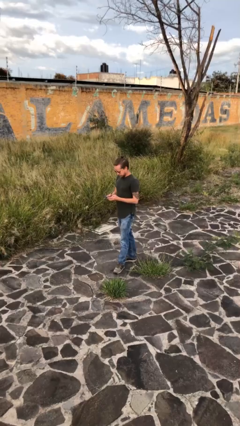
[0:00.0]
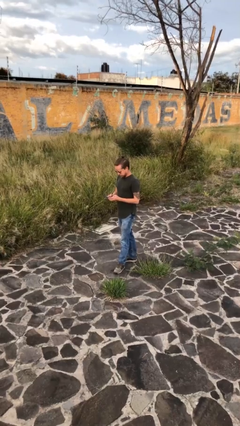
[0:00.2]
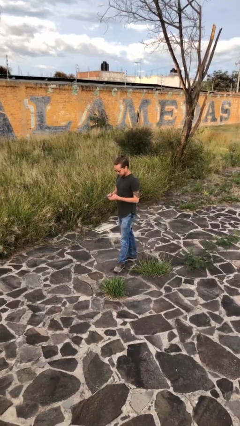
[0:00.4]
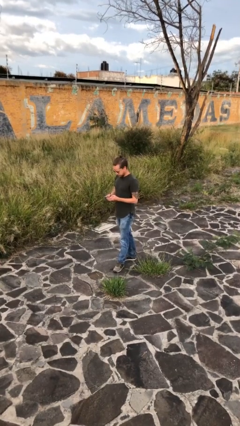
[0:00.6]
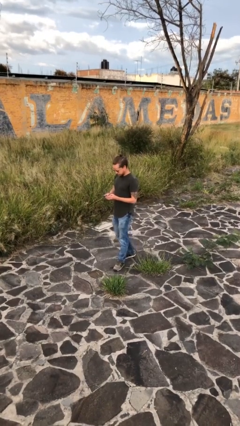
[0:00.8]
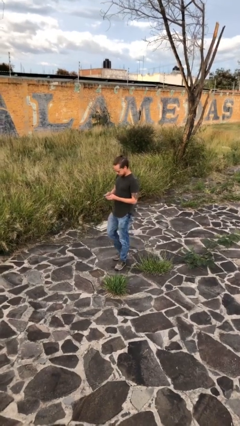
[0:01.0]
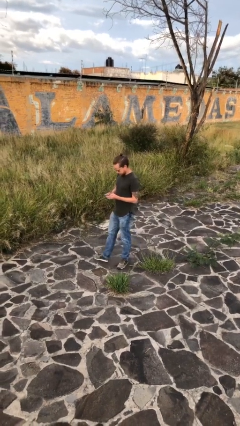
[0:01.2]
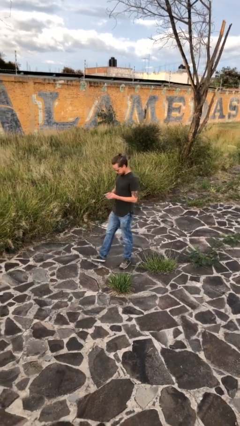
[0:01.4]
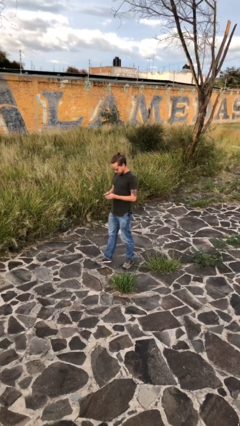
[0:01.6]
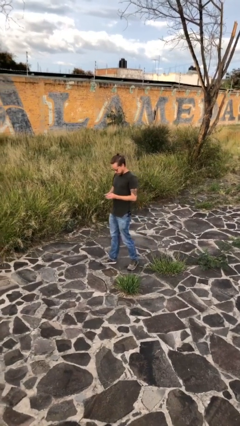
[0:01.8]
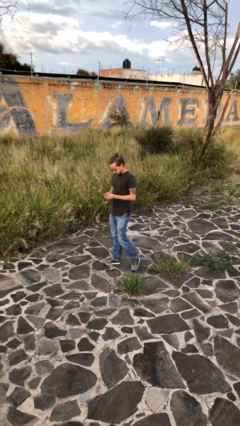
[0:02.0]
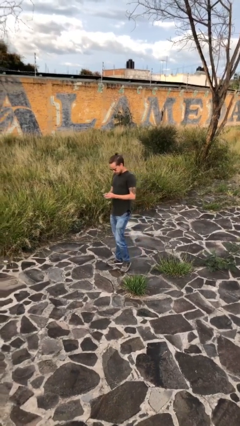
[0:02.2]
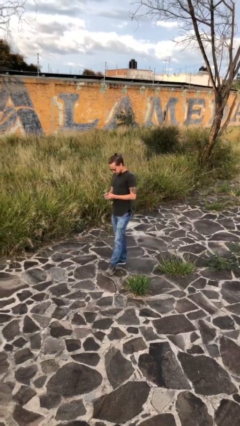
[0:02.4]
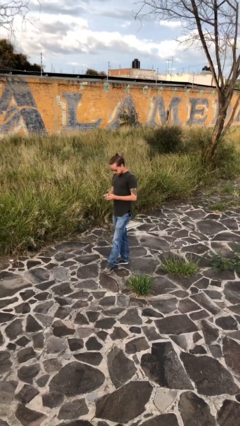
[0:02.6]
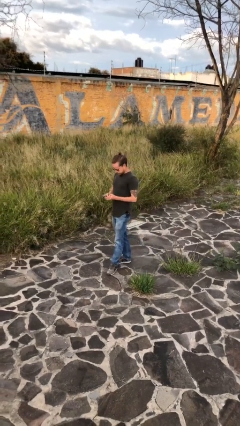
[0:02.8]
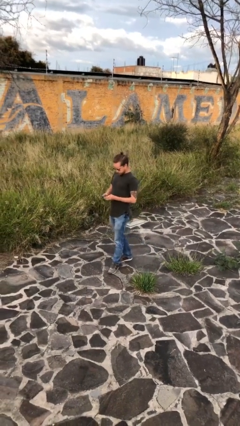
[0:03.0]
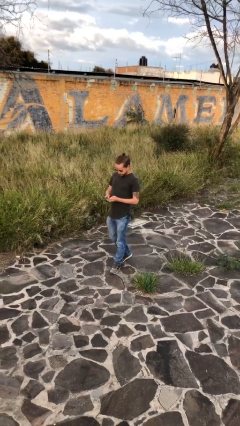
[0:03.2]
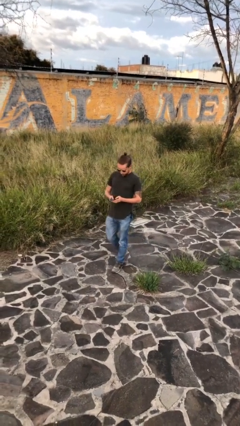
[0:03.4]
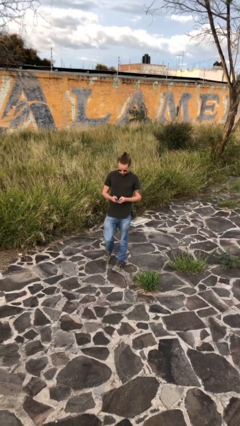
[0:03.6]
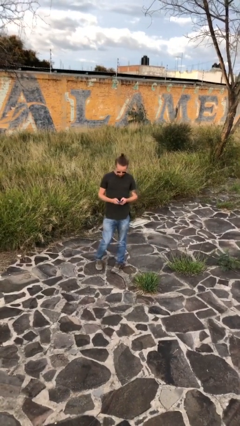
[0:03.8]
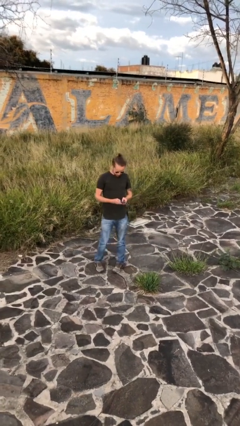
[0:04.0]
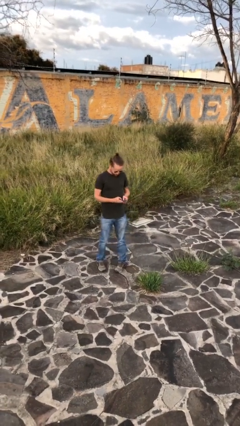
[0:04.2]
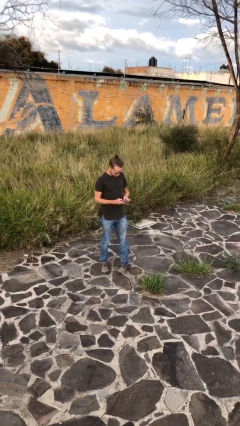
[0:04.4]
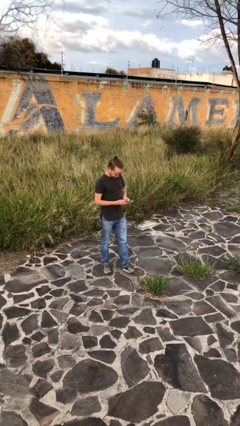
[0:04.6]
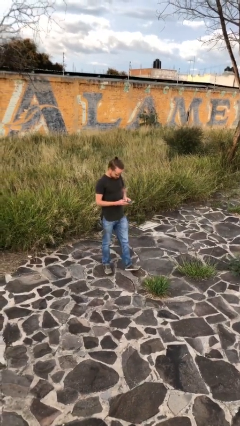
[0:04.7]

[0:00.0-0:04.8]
person texts on phone

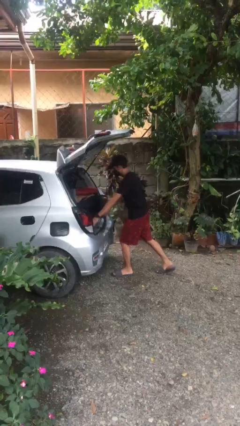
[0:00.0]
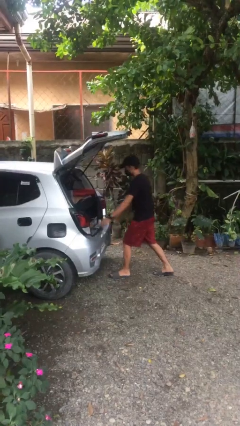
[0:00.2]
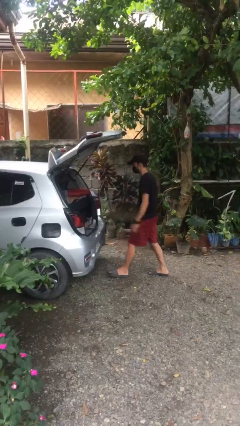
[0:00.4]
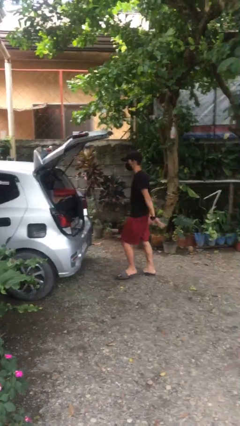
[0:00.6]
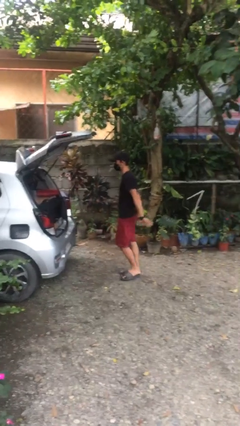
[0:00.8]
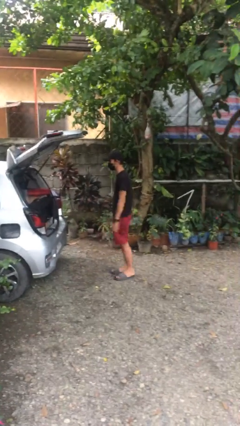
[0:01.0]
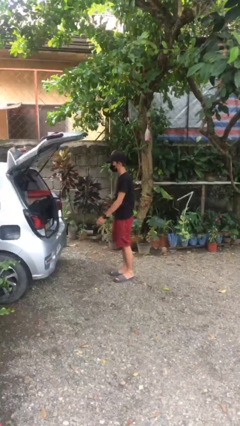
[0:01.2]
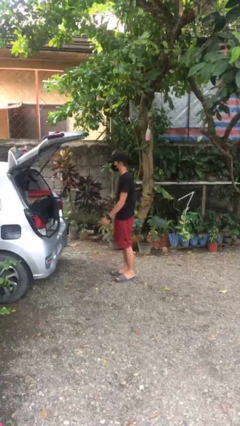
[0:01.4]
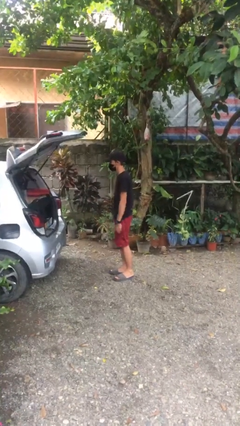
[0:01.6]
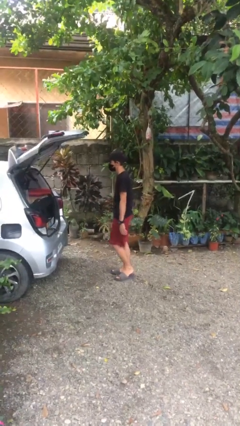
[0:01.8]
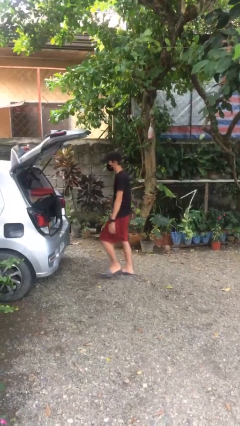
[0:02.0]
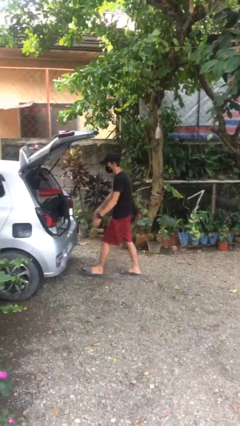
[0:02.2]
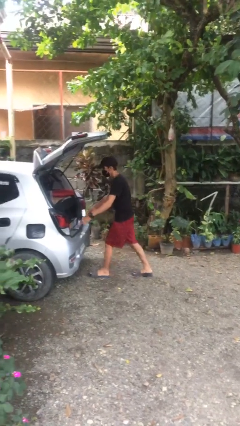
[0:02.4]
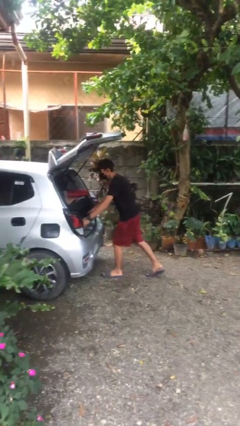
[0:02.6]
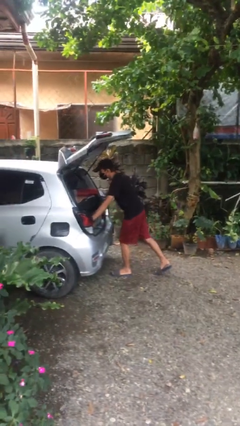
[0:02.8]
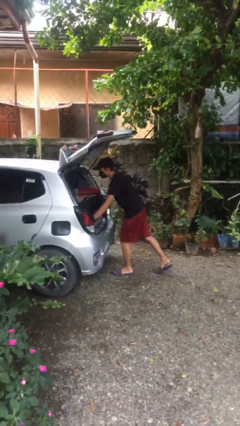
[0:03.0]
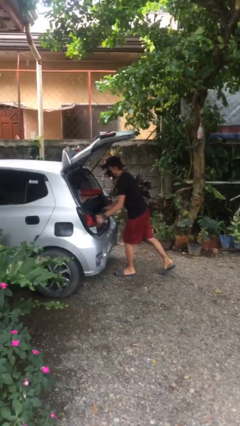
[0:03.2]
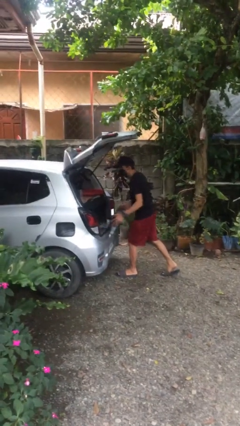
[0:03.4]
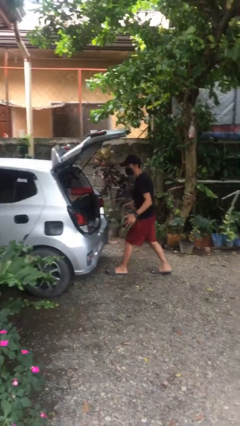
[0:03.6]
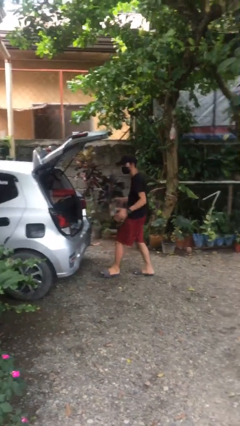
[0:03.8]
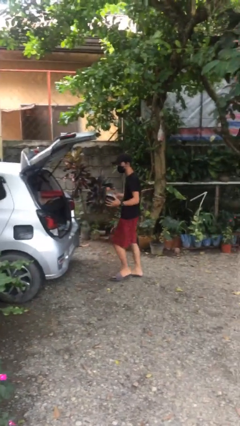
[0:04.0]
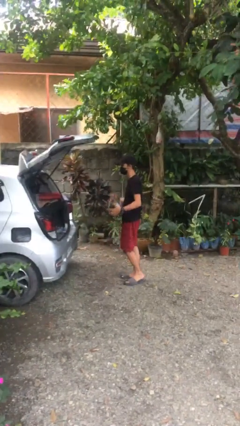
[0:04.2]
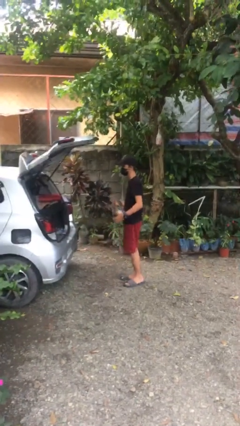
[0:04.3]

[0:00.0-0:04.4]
person unloads car

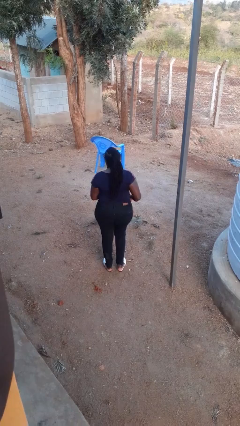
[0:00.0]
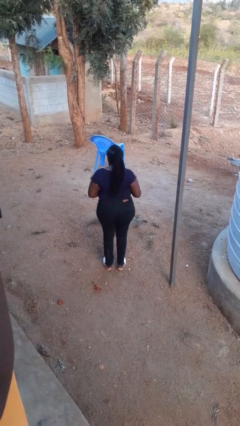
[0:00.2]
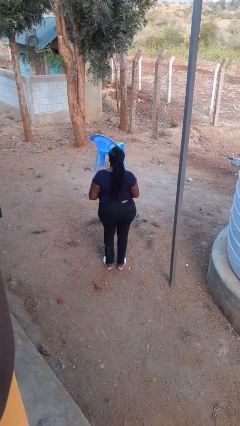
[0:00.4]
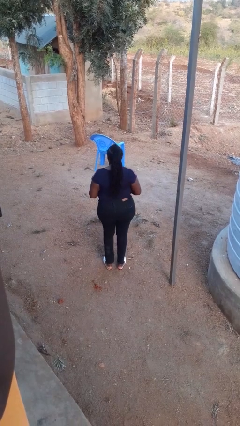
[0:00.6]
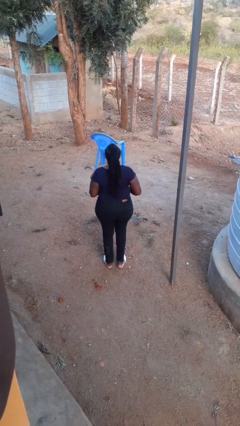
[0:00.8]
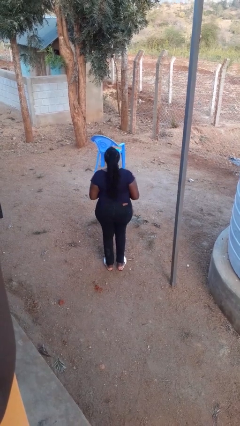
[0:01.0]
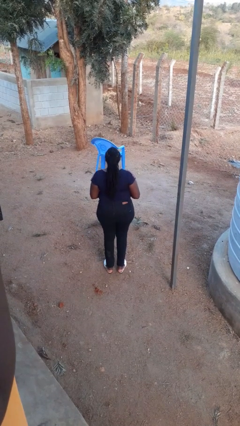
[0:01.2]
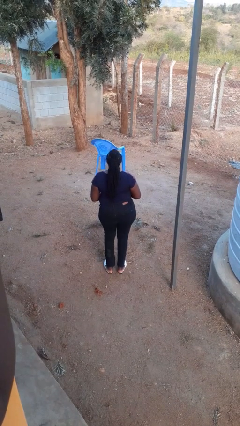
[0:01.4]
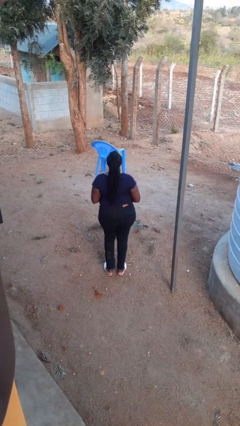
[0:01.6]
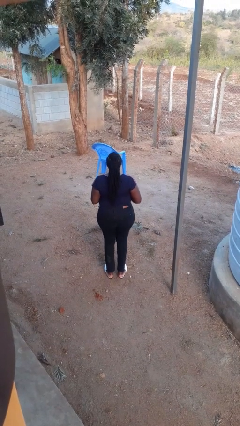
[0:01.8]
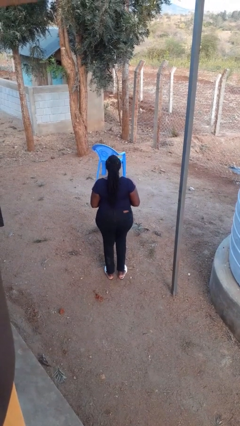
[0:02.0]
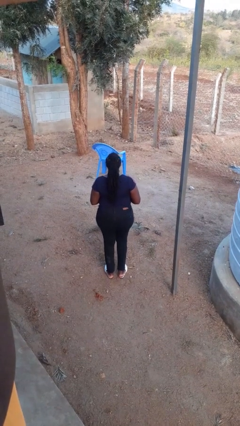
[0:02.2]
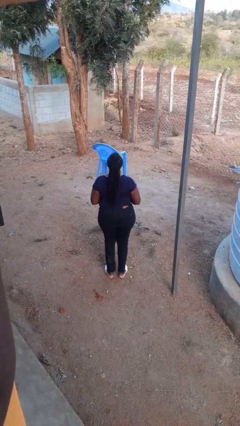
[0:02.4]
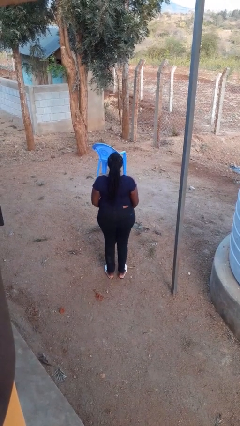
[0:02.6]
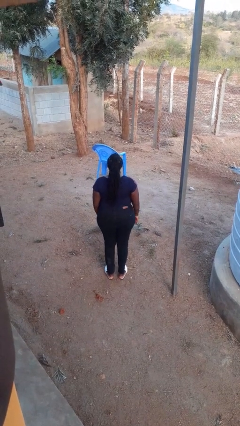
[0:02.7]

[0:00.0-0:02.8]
person wiggles hips

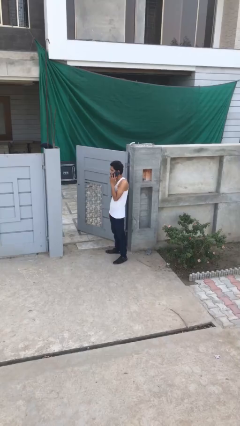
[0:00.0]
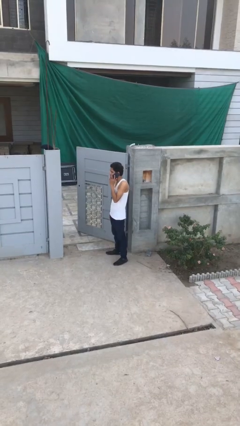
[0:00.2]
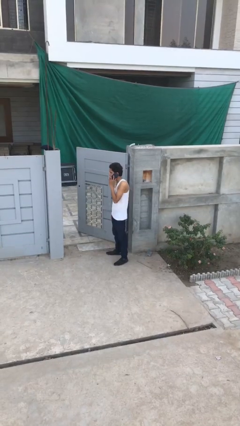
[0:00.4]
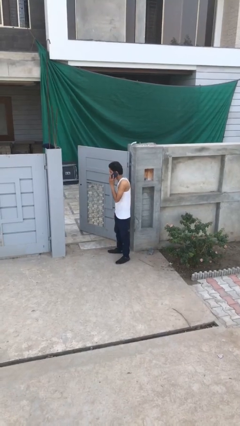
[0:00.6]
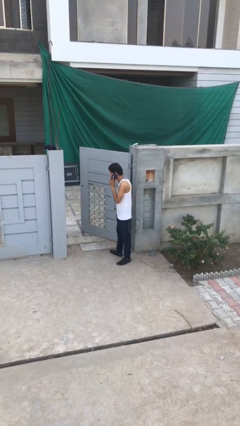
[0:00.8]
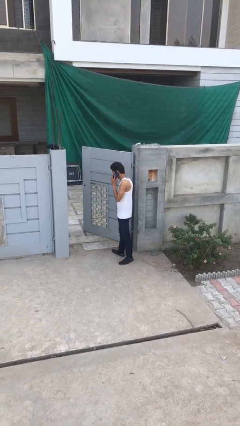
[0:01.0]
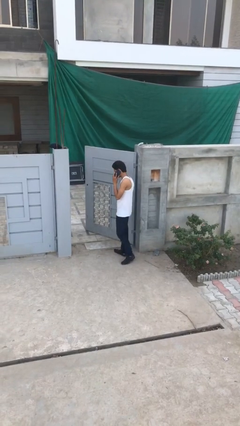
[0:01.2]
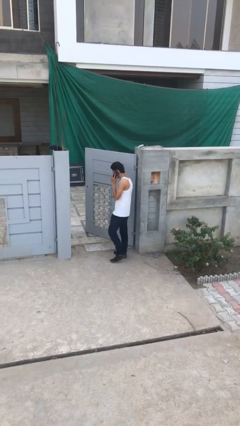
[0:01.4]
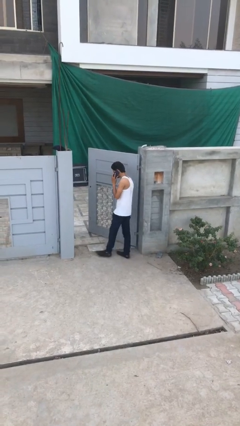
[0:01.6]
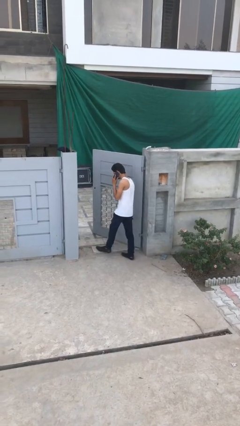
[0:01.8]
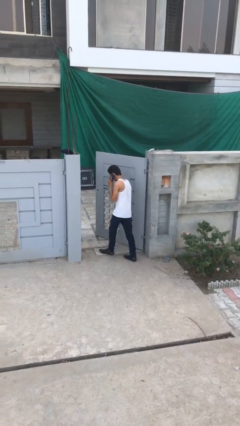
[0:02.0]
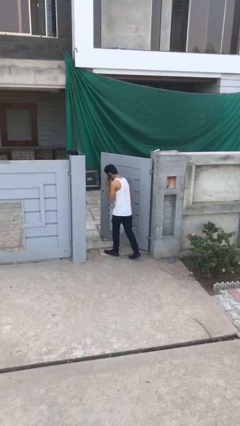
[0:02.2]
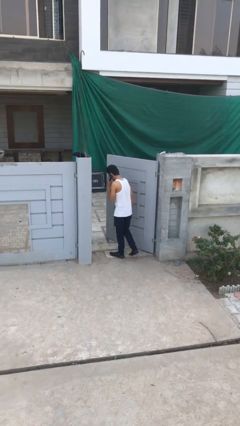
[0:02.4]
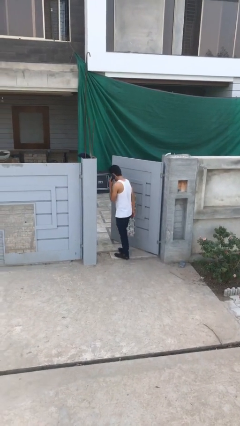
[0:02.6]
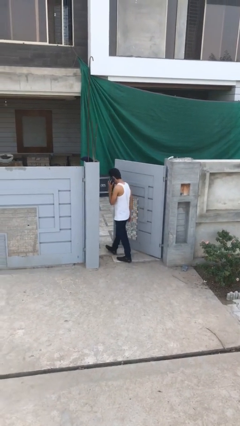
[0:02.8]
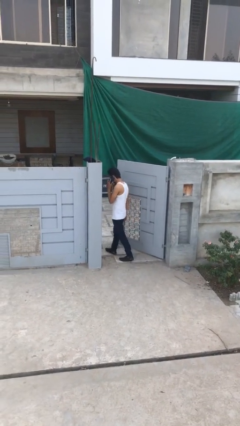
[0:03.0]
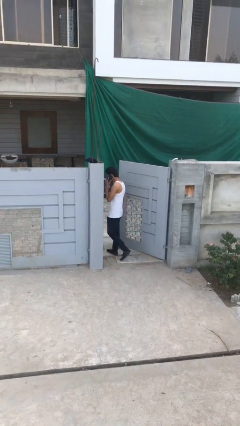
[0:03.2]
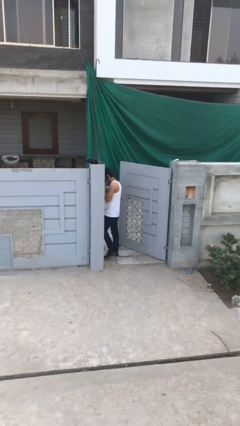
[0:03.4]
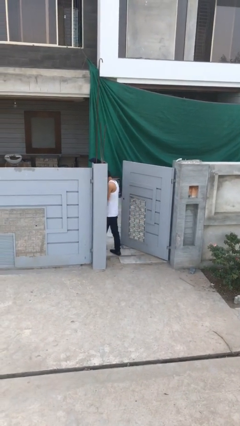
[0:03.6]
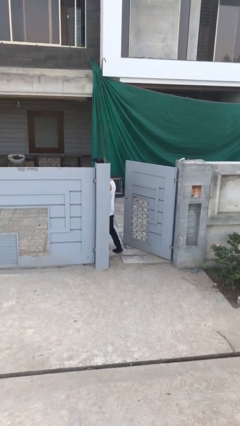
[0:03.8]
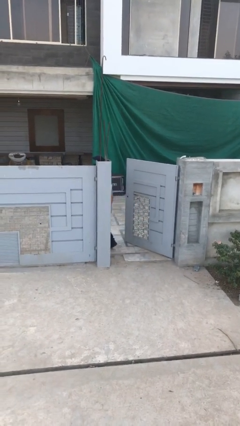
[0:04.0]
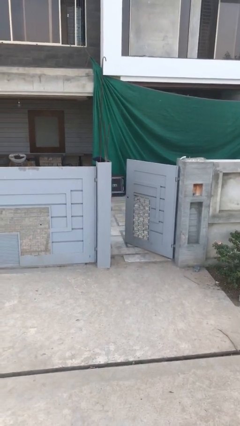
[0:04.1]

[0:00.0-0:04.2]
person exits scene through structure

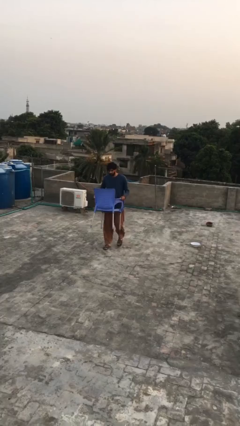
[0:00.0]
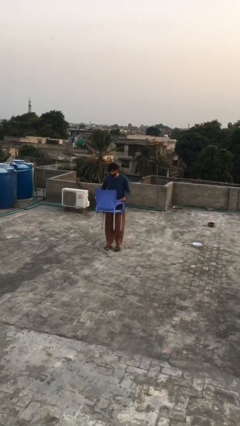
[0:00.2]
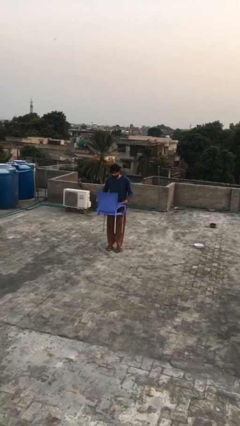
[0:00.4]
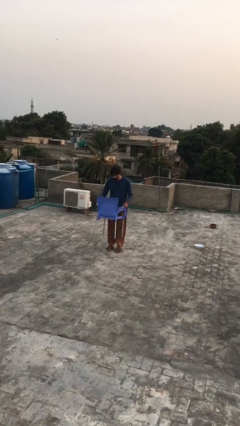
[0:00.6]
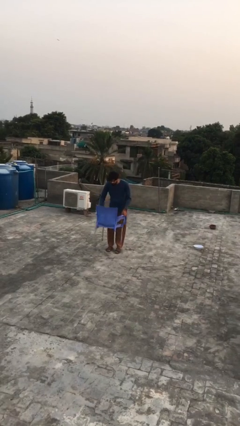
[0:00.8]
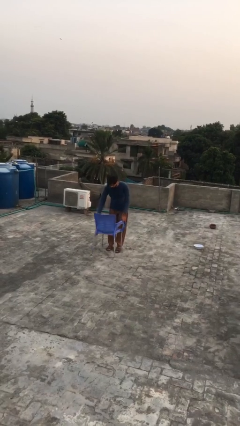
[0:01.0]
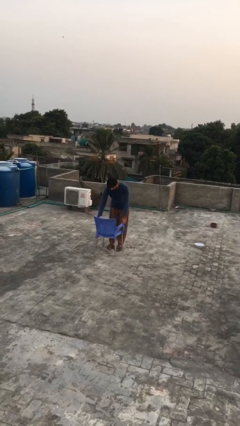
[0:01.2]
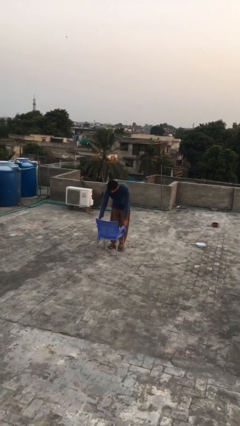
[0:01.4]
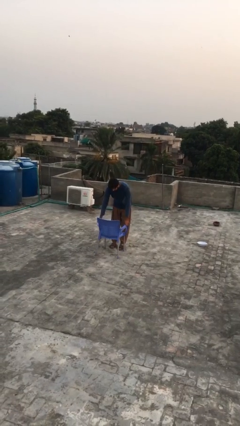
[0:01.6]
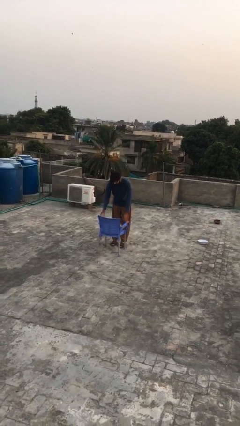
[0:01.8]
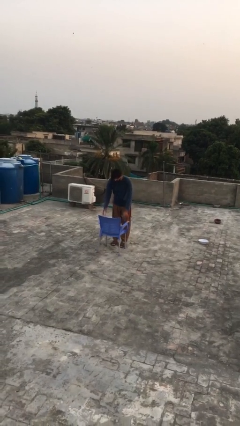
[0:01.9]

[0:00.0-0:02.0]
person puts down object on floor
